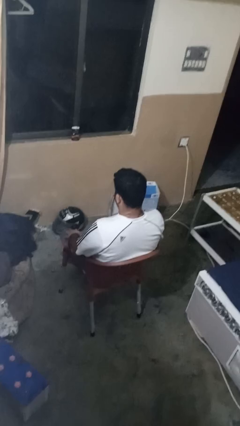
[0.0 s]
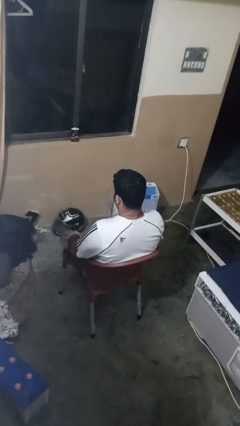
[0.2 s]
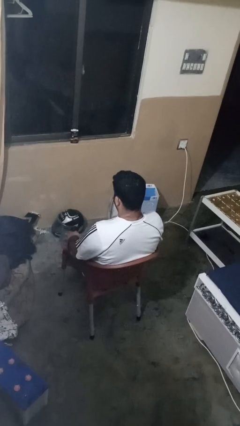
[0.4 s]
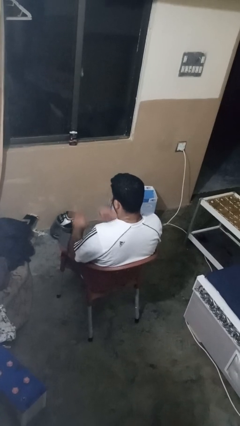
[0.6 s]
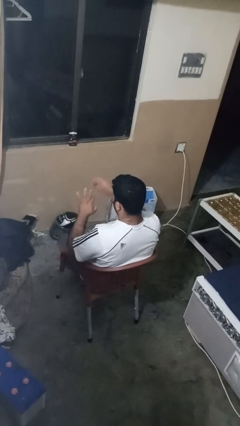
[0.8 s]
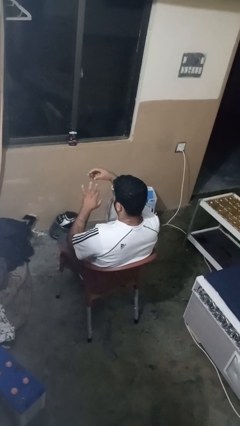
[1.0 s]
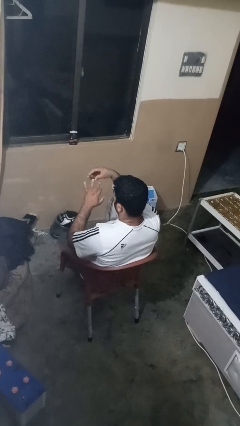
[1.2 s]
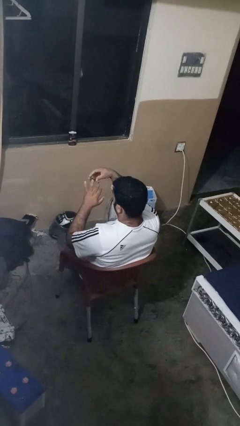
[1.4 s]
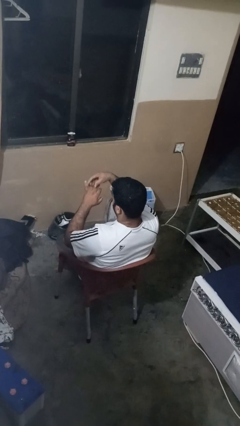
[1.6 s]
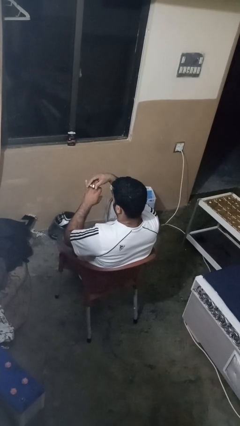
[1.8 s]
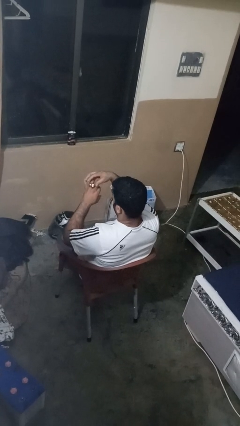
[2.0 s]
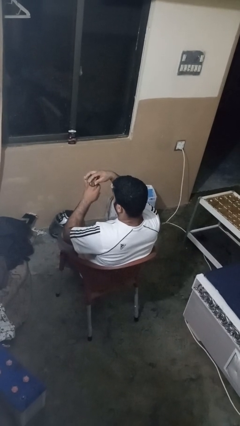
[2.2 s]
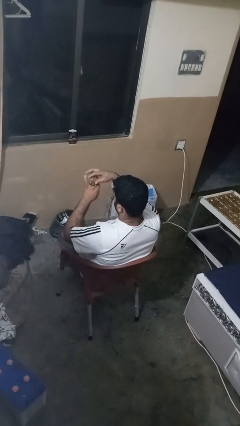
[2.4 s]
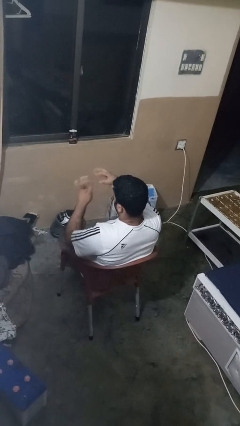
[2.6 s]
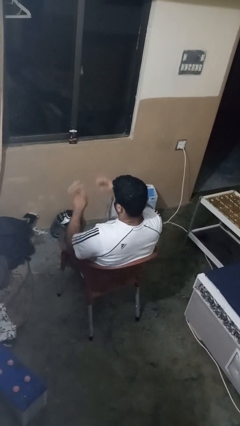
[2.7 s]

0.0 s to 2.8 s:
person puts on ring

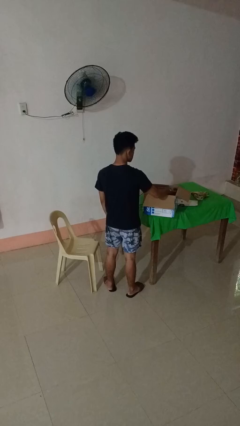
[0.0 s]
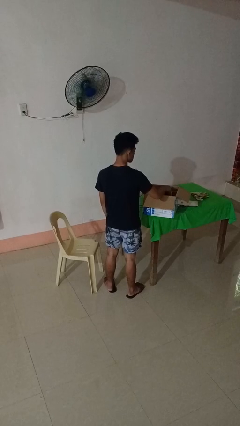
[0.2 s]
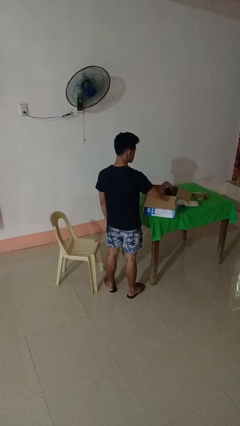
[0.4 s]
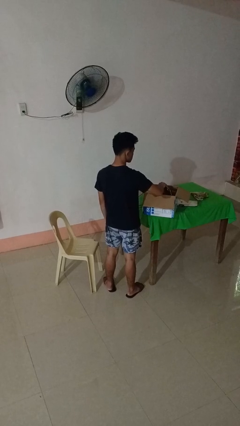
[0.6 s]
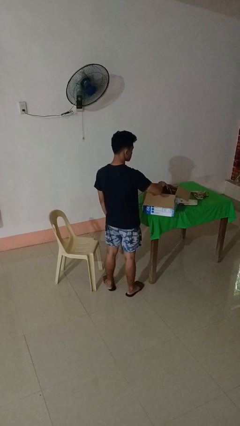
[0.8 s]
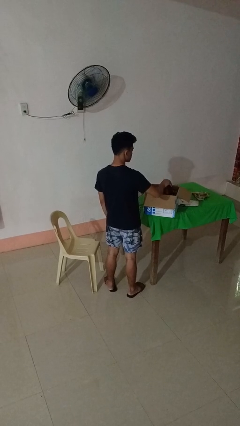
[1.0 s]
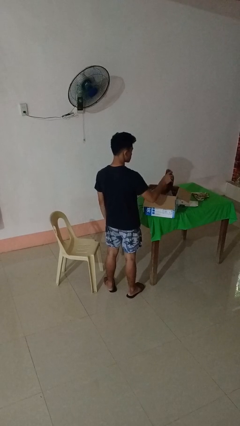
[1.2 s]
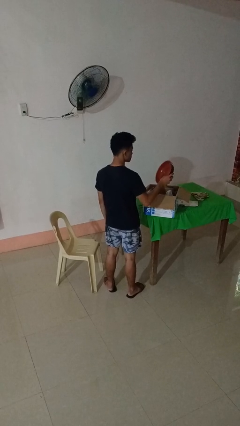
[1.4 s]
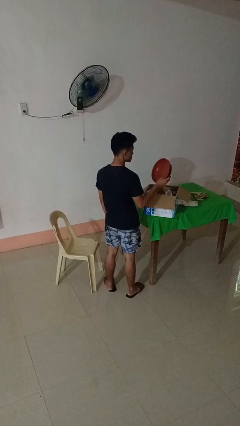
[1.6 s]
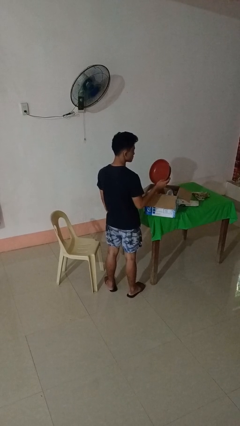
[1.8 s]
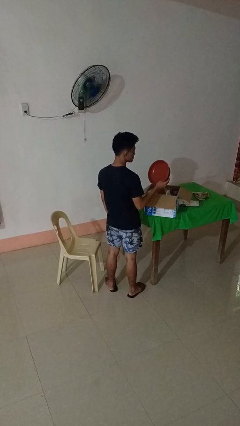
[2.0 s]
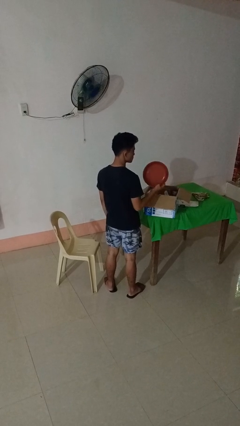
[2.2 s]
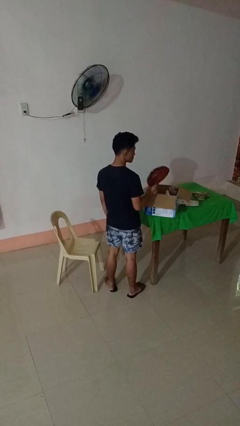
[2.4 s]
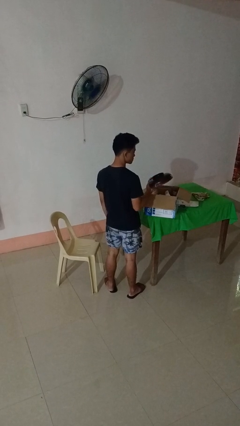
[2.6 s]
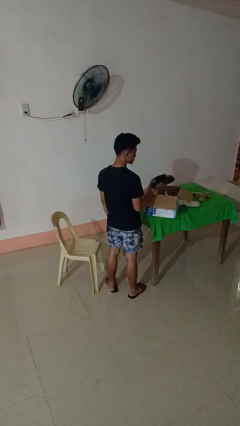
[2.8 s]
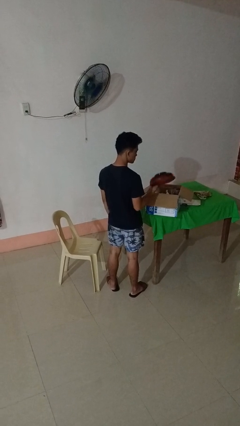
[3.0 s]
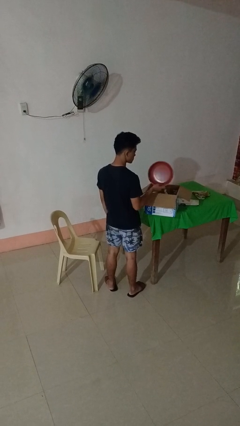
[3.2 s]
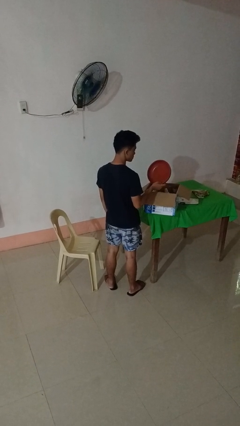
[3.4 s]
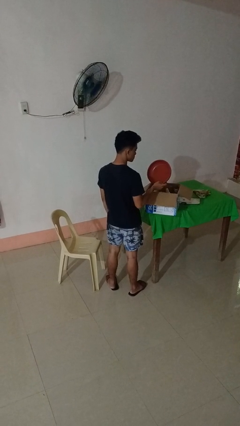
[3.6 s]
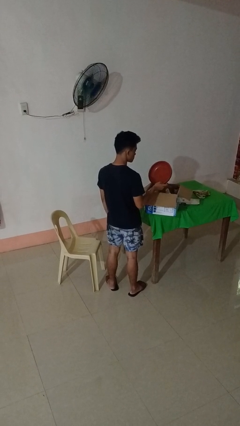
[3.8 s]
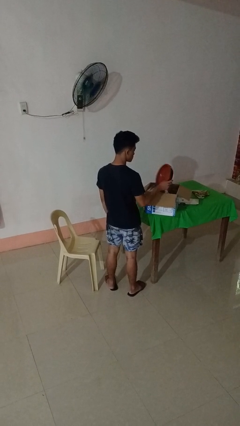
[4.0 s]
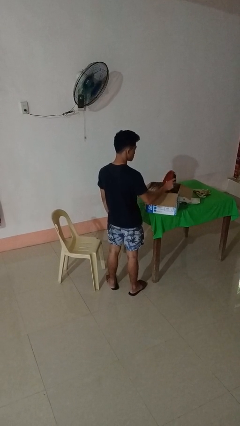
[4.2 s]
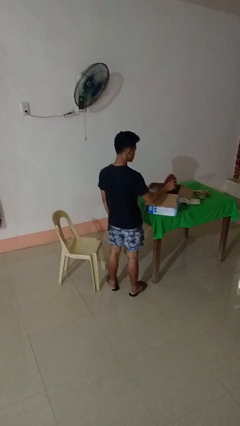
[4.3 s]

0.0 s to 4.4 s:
person takes object from box

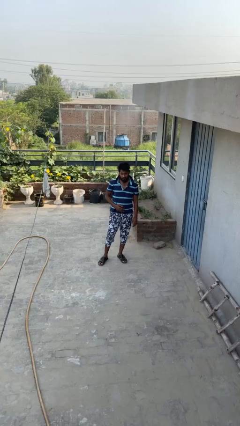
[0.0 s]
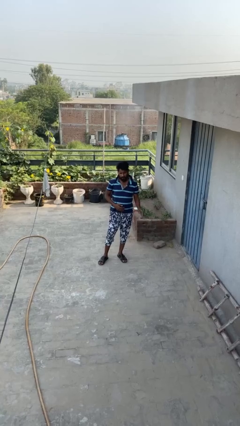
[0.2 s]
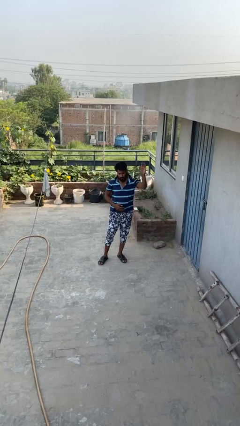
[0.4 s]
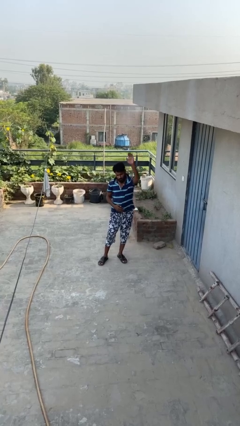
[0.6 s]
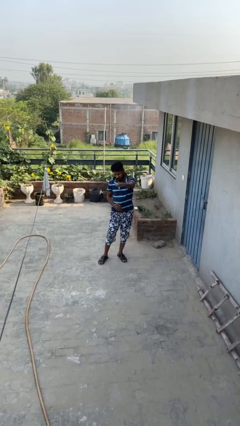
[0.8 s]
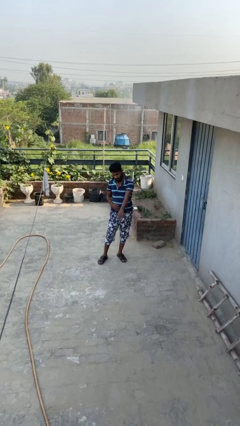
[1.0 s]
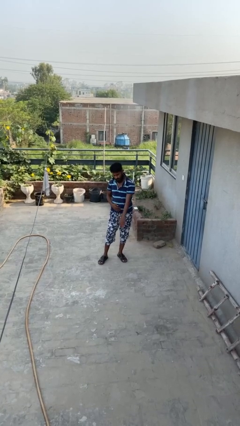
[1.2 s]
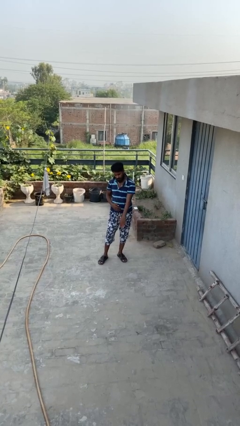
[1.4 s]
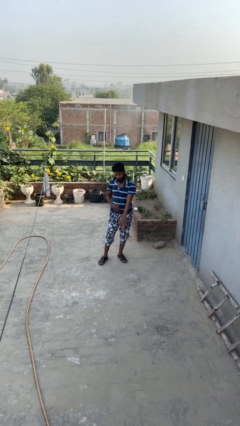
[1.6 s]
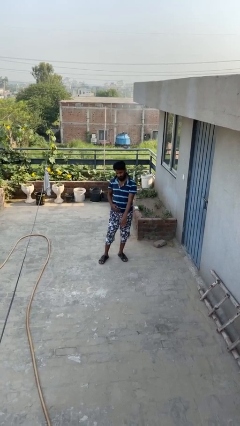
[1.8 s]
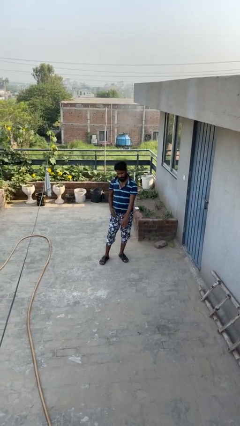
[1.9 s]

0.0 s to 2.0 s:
person gestures swipe down

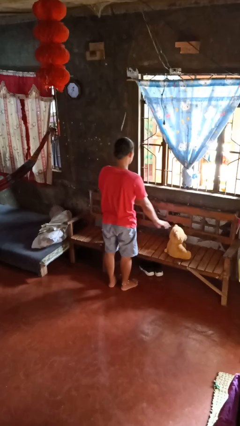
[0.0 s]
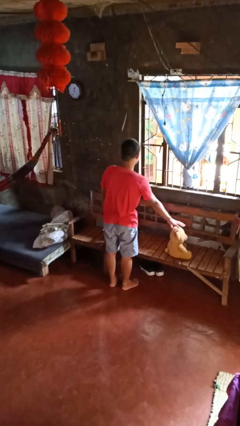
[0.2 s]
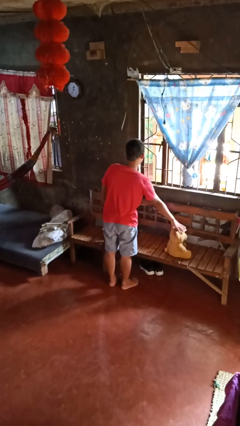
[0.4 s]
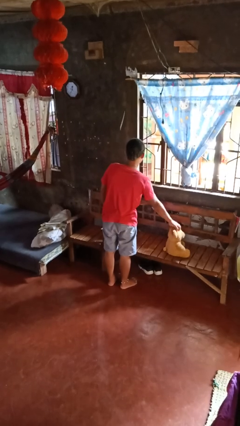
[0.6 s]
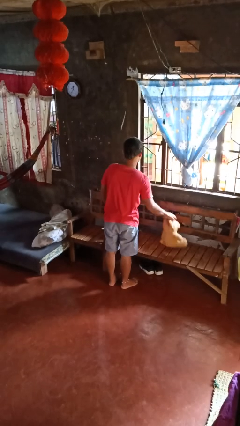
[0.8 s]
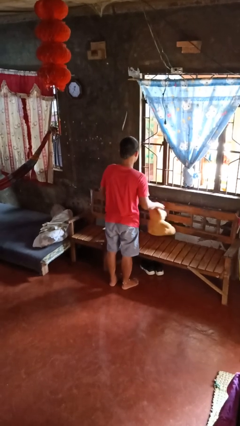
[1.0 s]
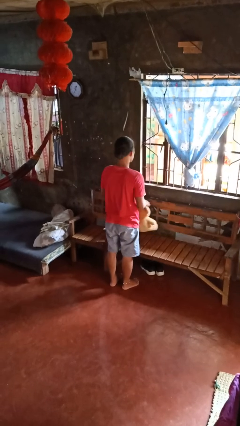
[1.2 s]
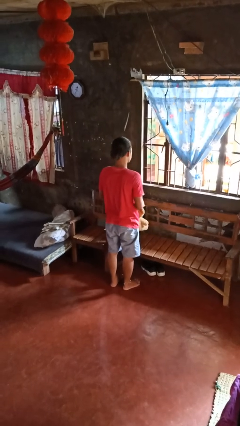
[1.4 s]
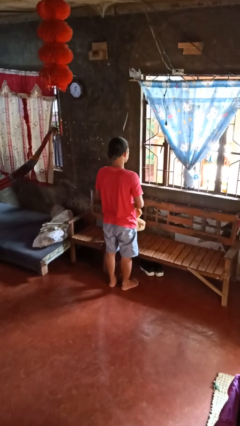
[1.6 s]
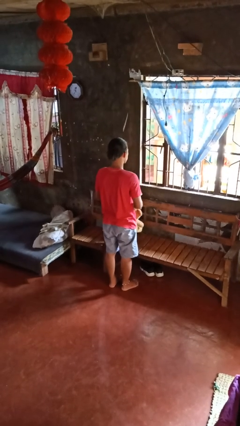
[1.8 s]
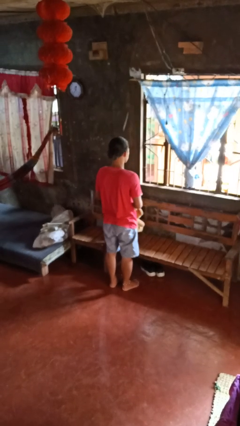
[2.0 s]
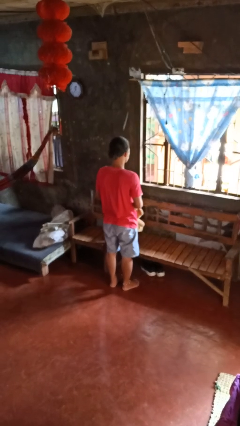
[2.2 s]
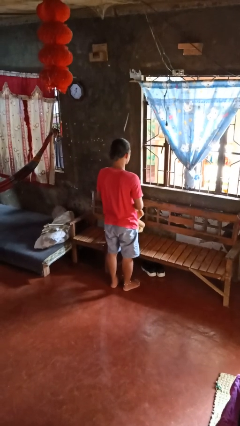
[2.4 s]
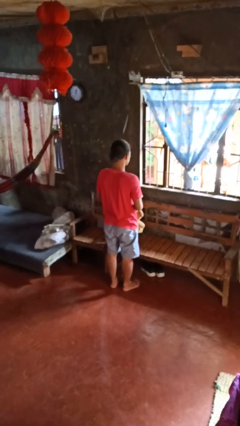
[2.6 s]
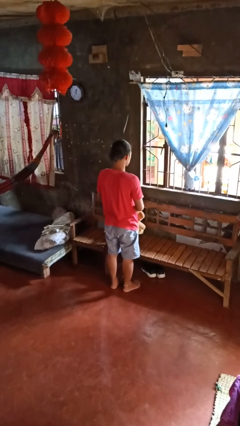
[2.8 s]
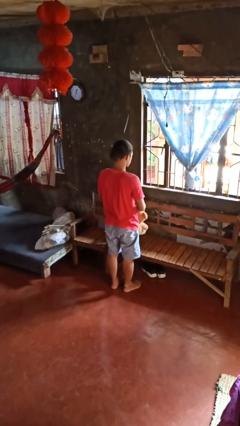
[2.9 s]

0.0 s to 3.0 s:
person picks up object from couch

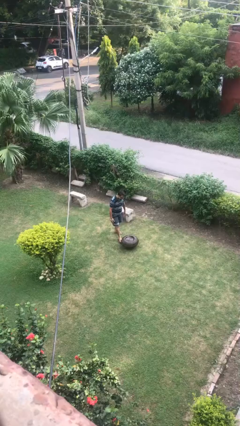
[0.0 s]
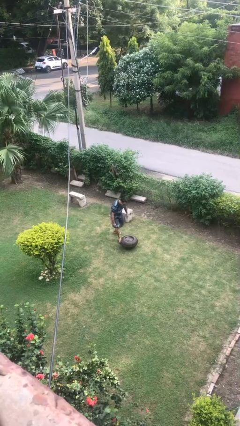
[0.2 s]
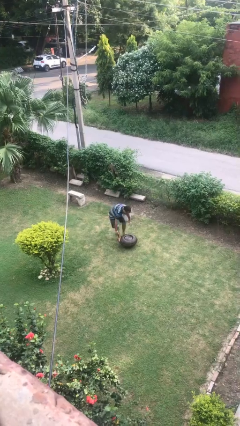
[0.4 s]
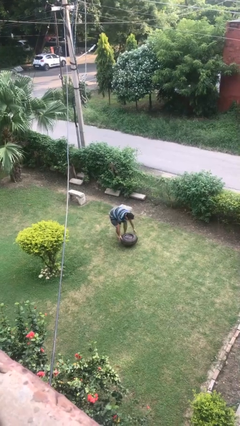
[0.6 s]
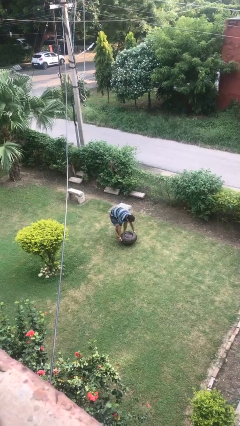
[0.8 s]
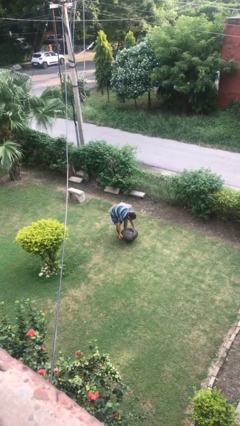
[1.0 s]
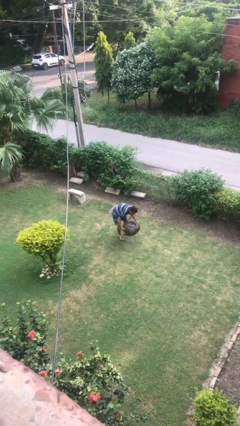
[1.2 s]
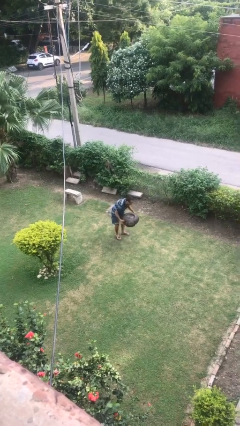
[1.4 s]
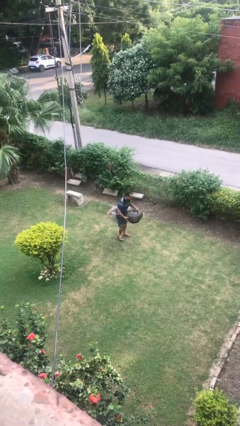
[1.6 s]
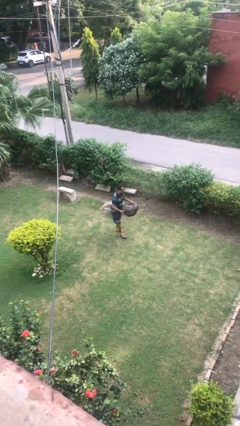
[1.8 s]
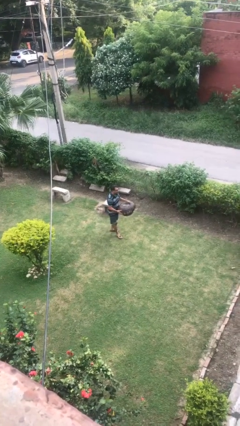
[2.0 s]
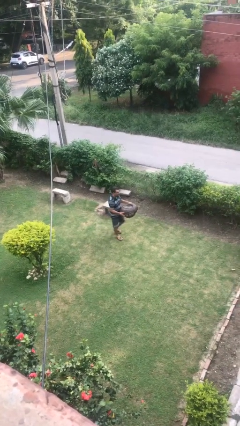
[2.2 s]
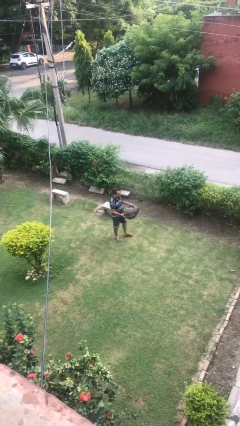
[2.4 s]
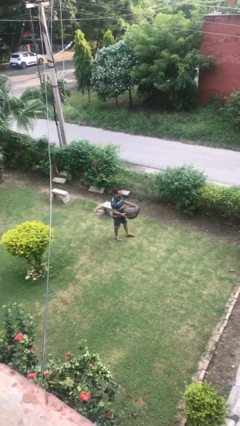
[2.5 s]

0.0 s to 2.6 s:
person picks up object from floor

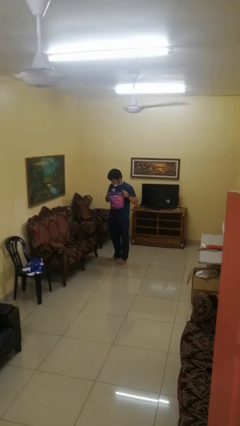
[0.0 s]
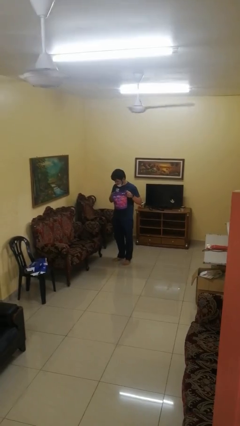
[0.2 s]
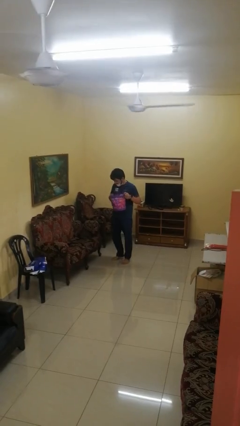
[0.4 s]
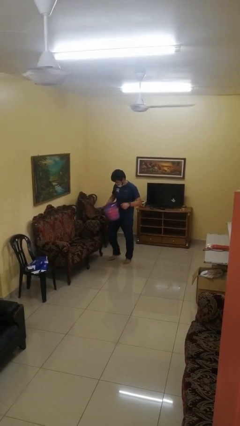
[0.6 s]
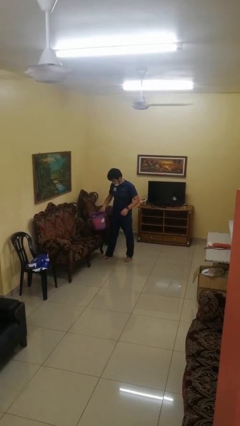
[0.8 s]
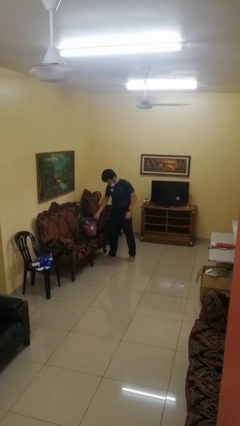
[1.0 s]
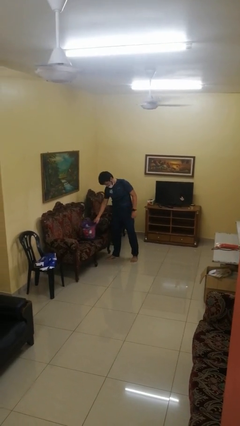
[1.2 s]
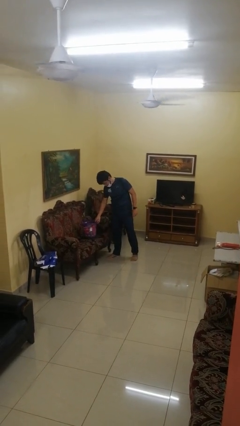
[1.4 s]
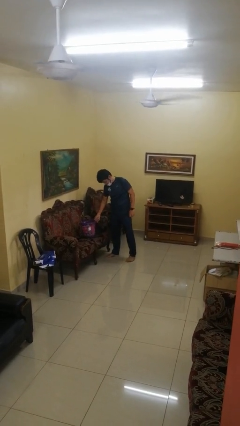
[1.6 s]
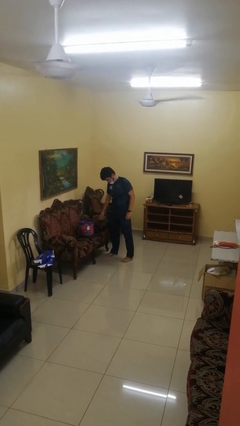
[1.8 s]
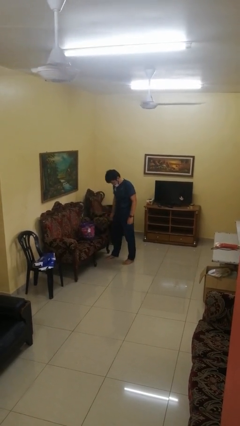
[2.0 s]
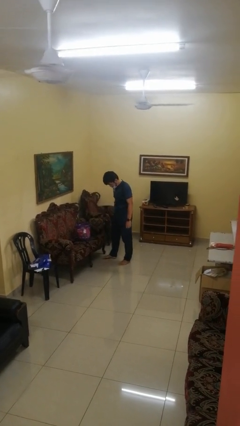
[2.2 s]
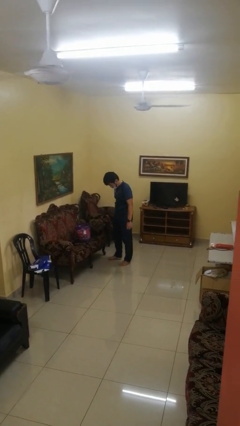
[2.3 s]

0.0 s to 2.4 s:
person puts down object on couch

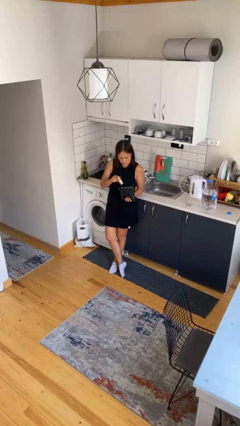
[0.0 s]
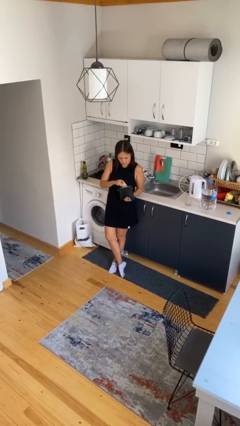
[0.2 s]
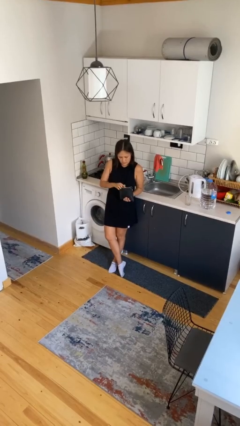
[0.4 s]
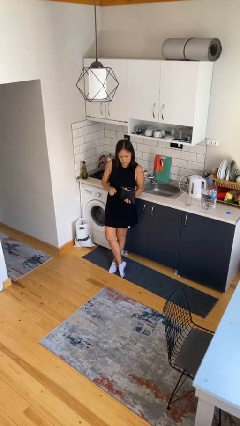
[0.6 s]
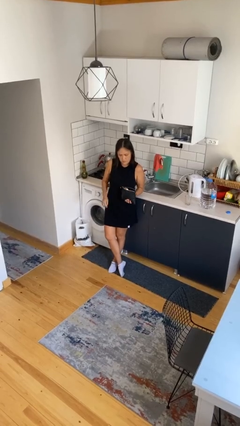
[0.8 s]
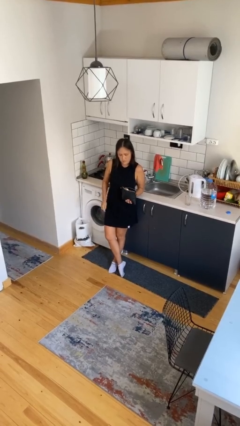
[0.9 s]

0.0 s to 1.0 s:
person puts object into purse
